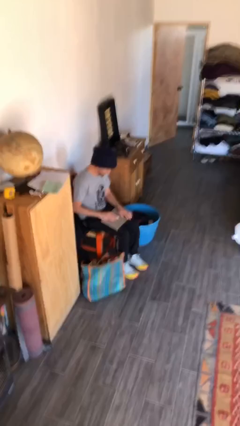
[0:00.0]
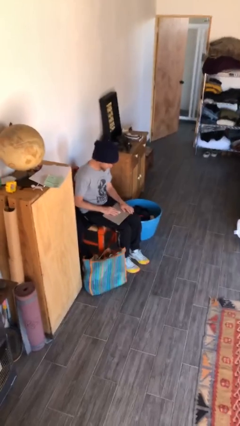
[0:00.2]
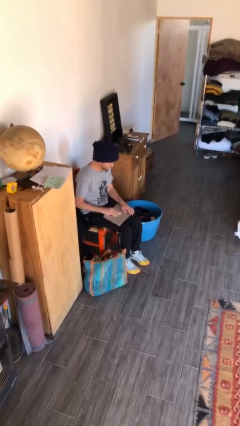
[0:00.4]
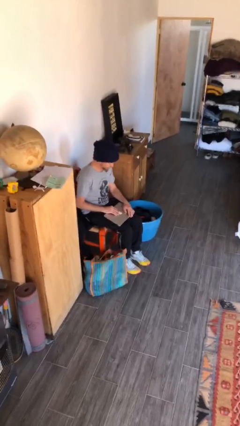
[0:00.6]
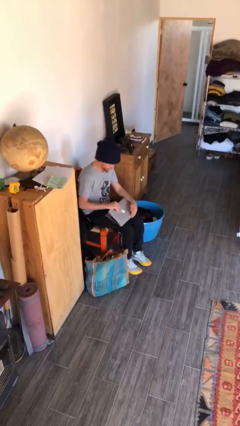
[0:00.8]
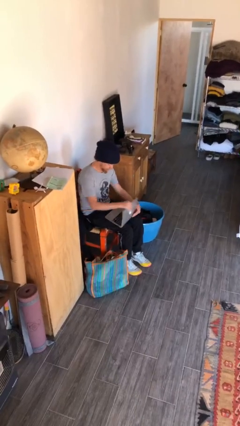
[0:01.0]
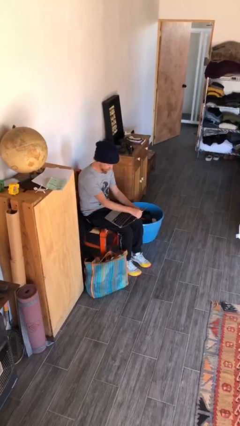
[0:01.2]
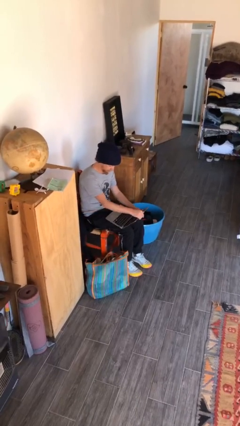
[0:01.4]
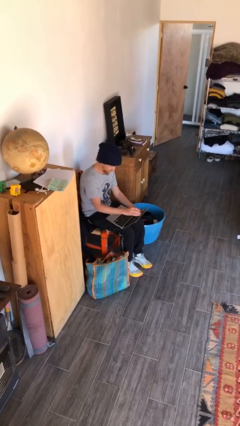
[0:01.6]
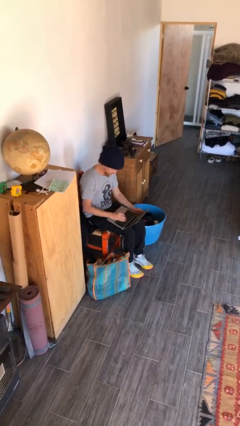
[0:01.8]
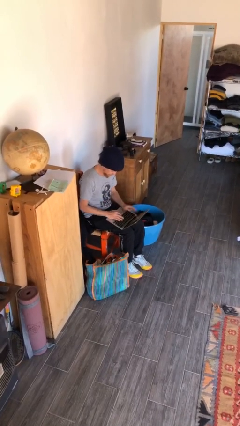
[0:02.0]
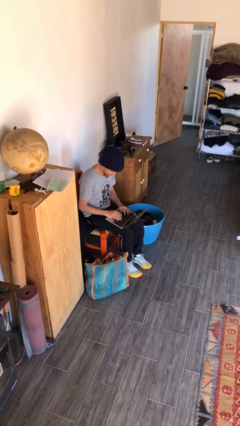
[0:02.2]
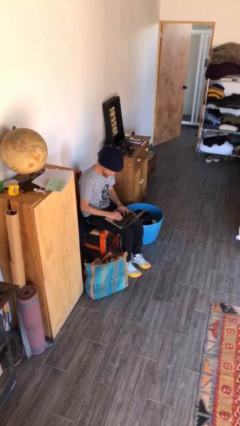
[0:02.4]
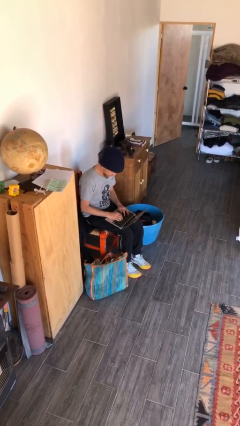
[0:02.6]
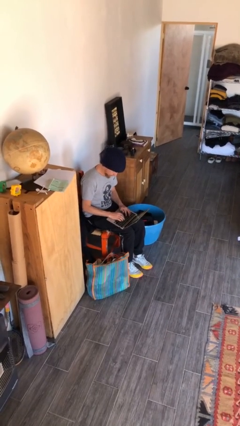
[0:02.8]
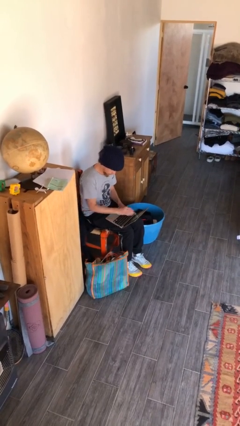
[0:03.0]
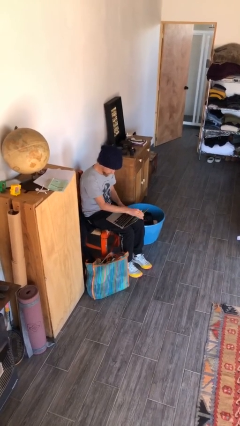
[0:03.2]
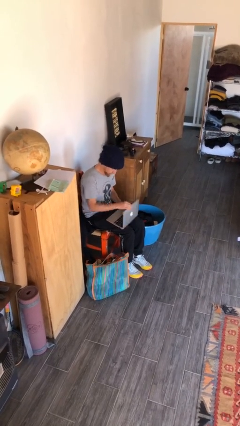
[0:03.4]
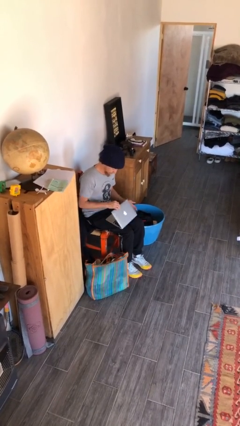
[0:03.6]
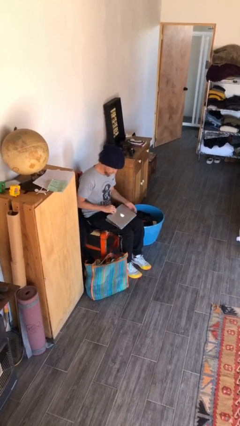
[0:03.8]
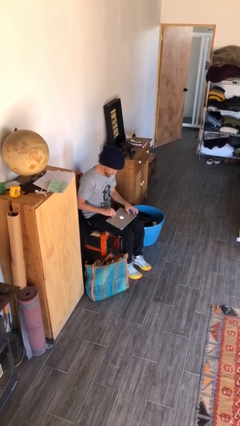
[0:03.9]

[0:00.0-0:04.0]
person interacts with laptop

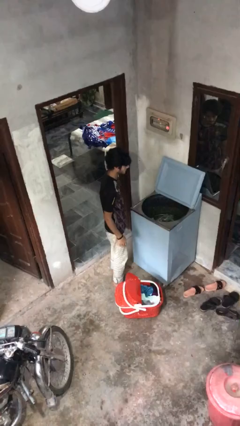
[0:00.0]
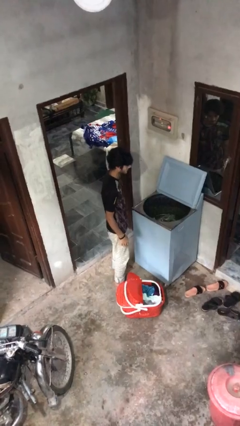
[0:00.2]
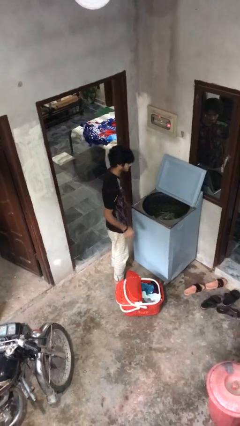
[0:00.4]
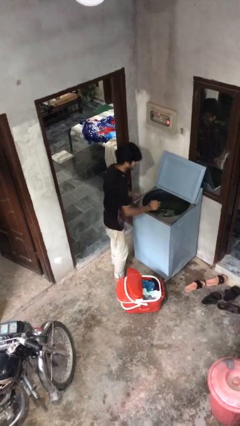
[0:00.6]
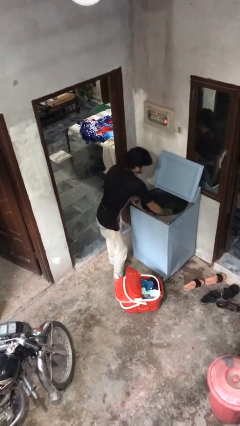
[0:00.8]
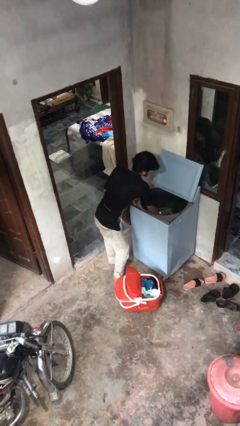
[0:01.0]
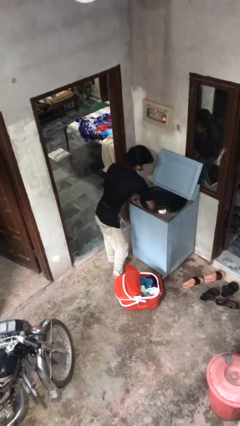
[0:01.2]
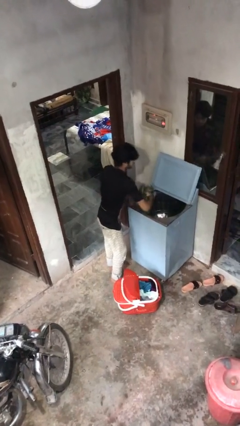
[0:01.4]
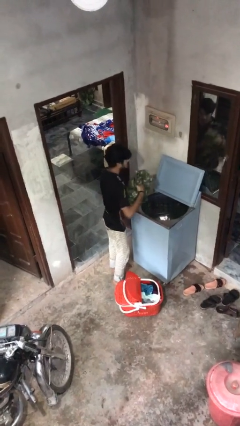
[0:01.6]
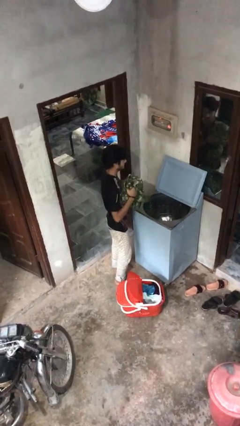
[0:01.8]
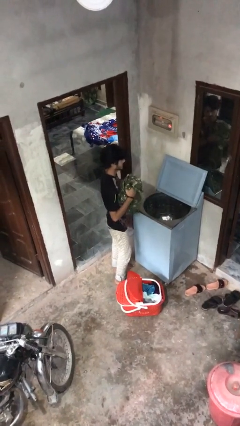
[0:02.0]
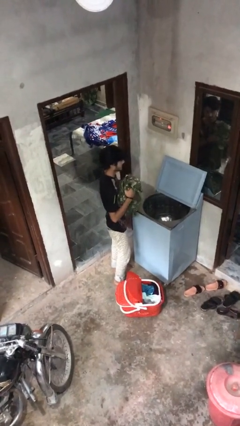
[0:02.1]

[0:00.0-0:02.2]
person unloads clotheswasher

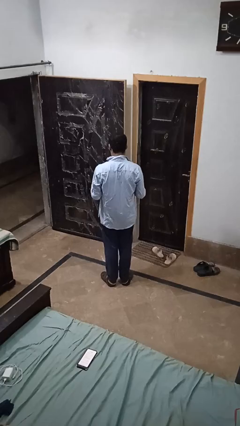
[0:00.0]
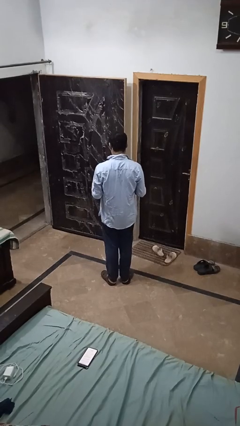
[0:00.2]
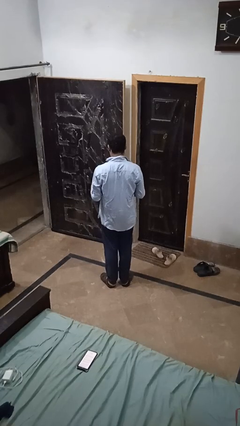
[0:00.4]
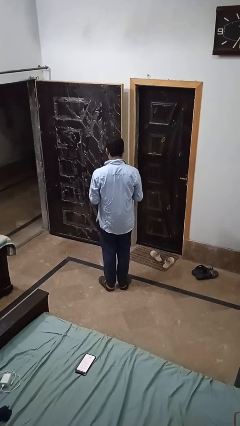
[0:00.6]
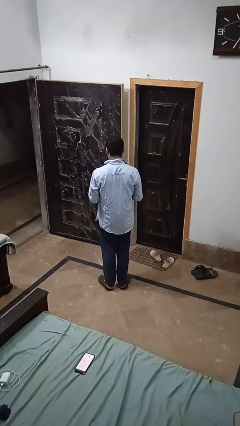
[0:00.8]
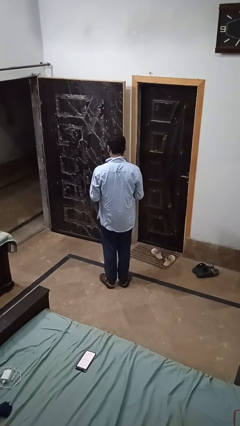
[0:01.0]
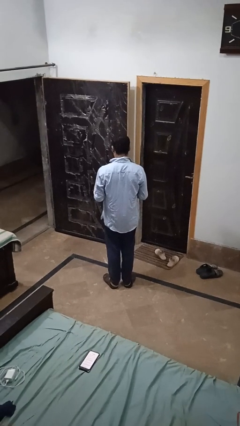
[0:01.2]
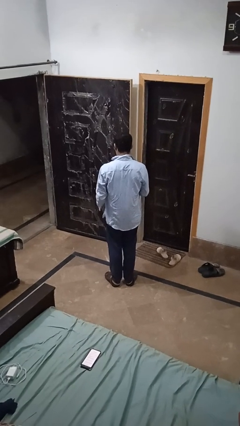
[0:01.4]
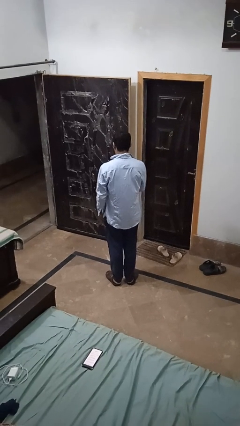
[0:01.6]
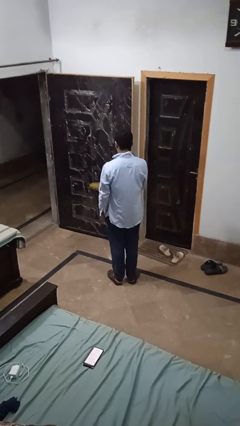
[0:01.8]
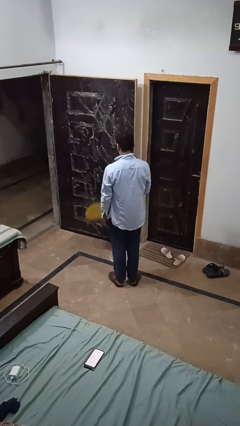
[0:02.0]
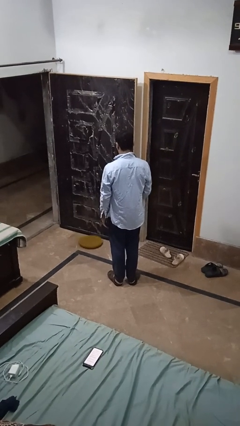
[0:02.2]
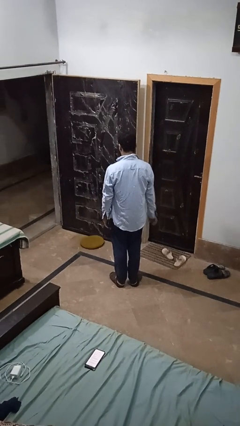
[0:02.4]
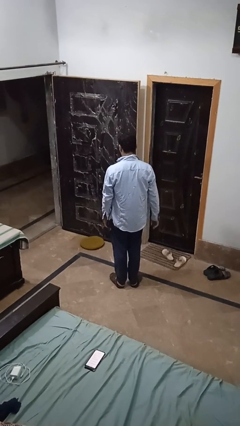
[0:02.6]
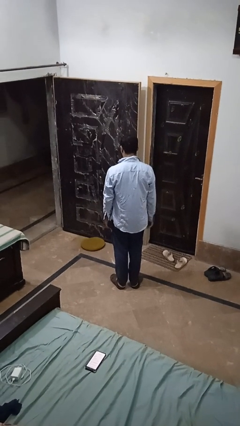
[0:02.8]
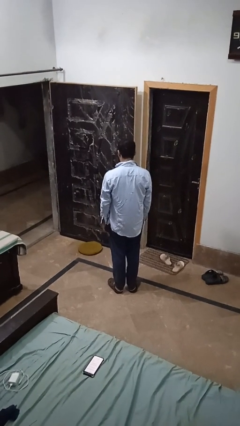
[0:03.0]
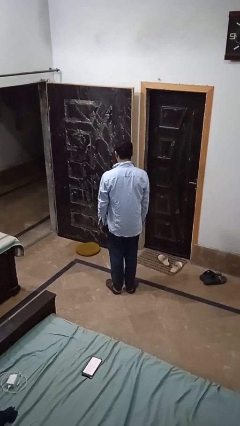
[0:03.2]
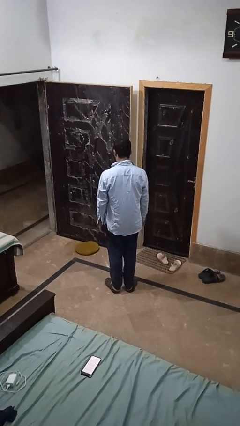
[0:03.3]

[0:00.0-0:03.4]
person throws object to ground

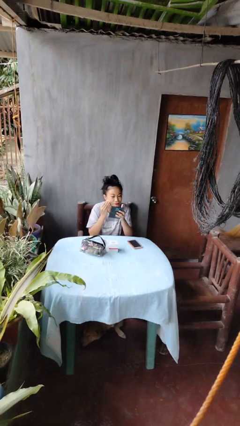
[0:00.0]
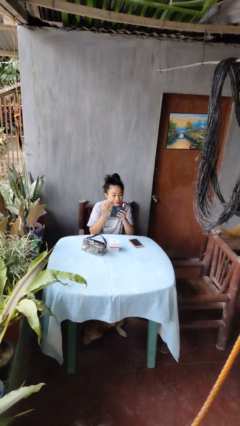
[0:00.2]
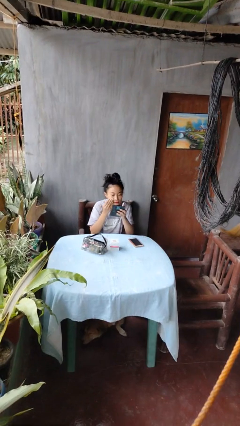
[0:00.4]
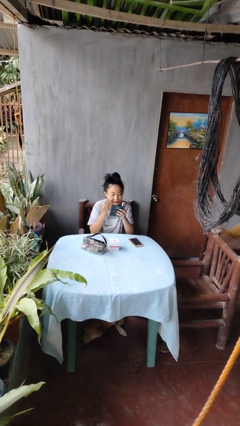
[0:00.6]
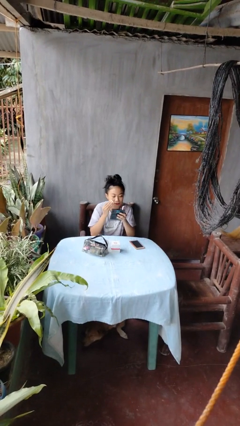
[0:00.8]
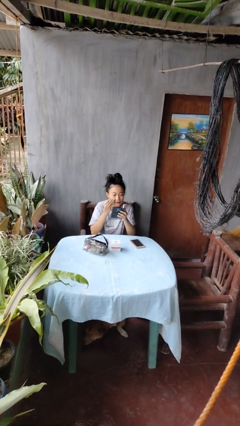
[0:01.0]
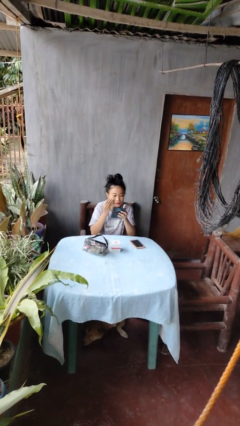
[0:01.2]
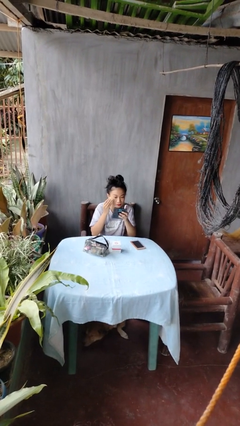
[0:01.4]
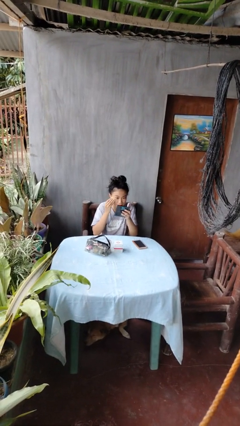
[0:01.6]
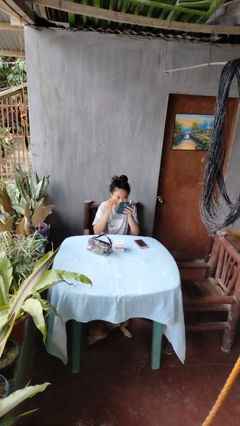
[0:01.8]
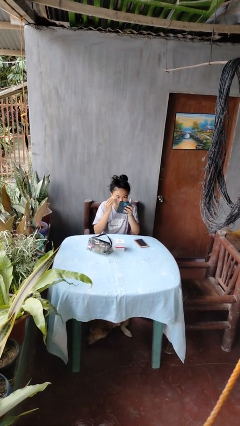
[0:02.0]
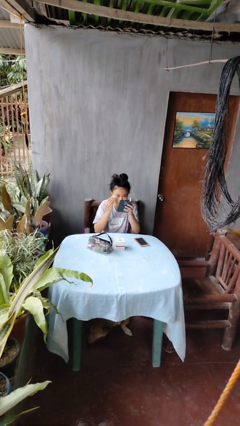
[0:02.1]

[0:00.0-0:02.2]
person applies foundation makeup

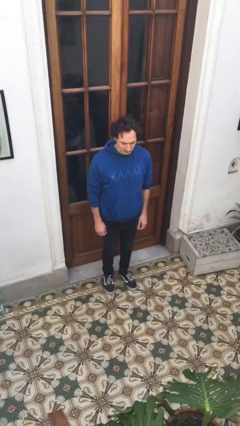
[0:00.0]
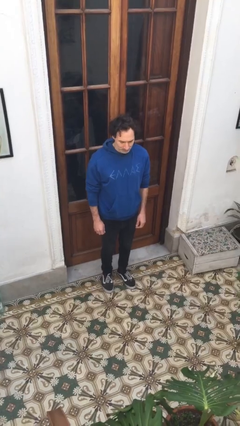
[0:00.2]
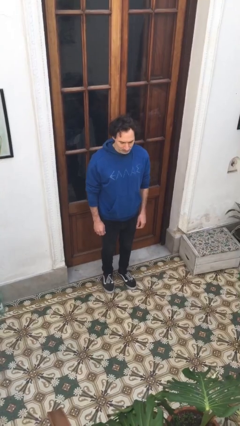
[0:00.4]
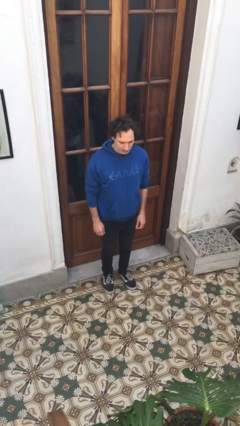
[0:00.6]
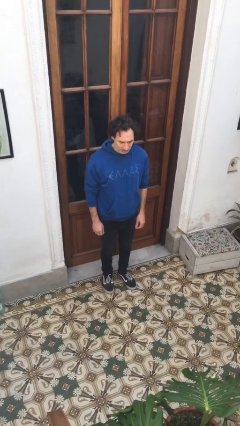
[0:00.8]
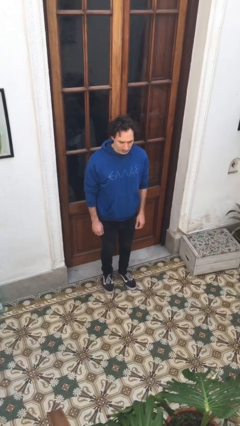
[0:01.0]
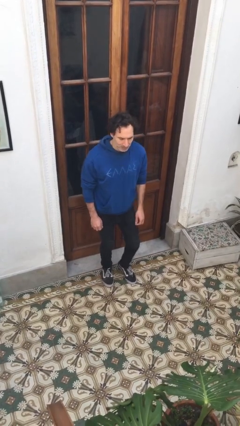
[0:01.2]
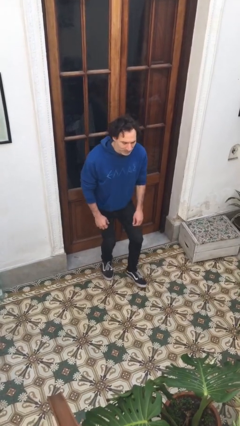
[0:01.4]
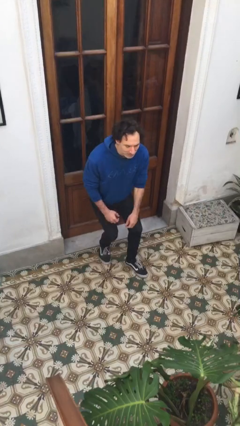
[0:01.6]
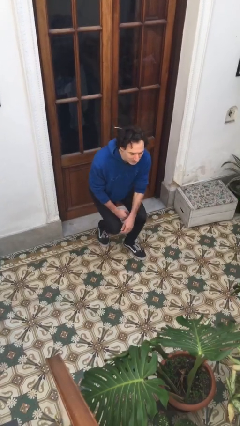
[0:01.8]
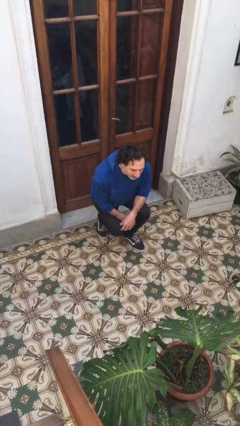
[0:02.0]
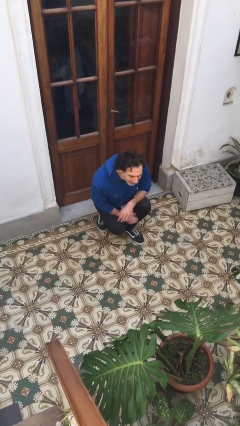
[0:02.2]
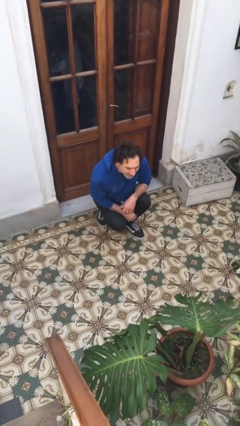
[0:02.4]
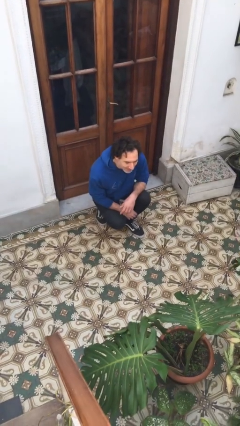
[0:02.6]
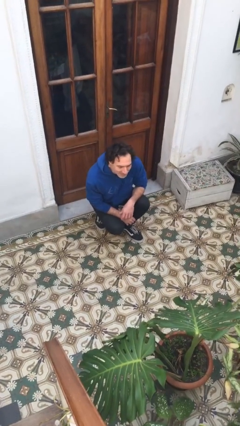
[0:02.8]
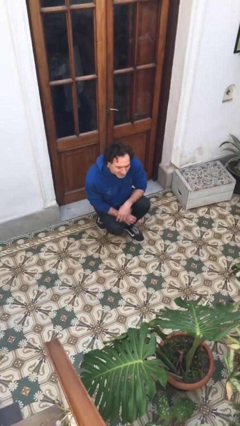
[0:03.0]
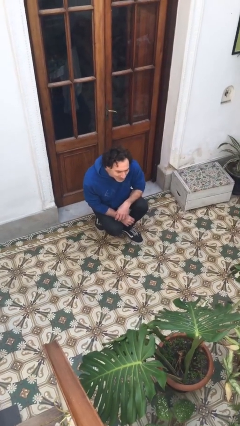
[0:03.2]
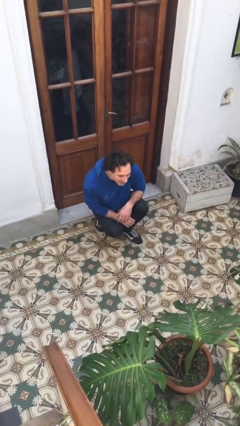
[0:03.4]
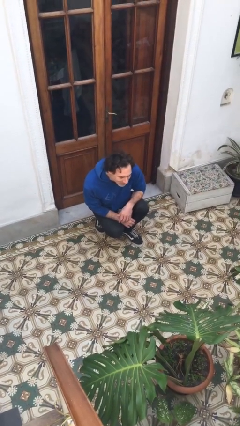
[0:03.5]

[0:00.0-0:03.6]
person squats

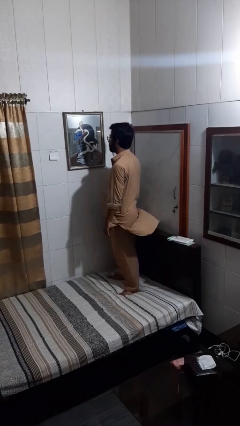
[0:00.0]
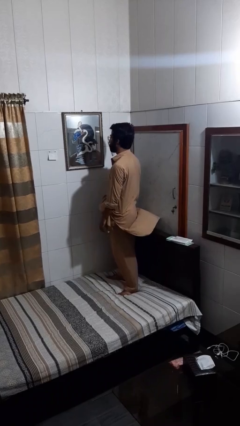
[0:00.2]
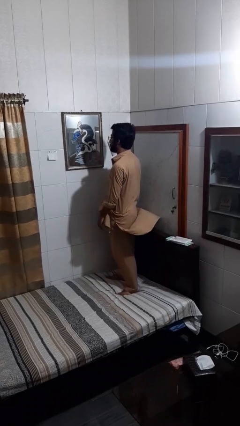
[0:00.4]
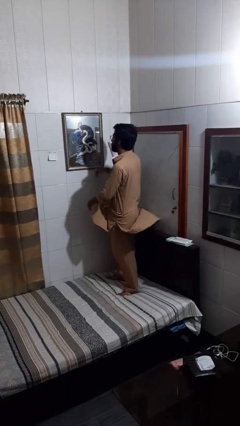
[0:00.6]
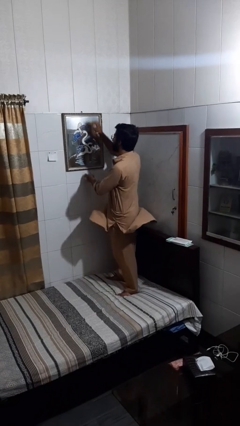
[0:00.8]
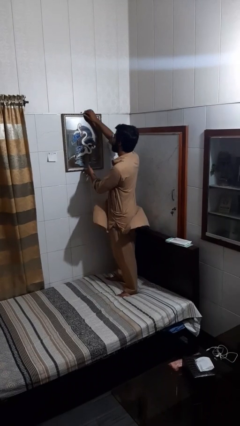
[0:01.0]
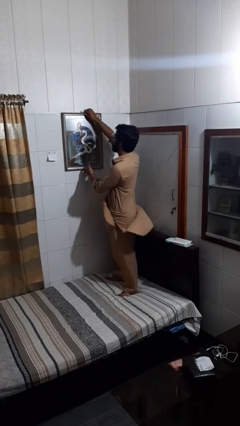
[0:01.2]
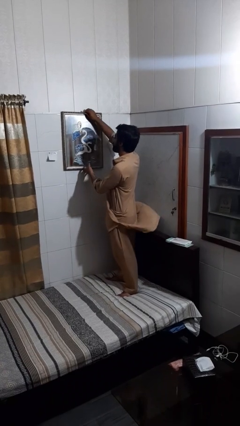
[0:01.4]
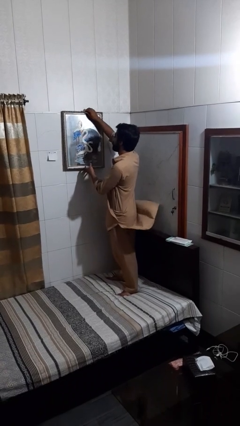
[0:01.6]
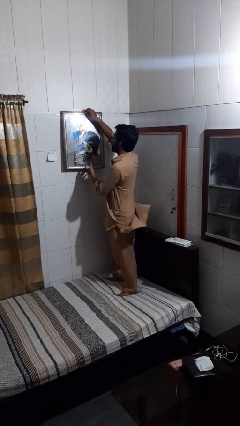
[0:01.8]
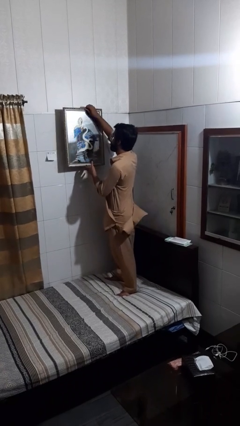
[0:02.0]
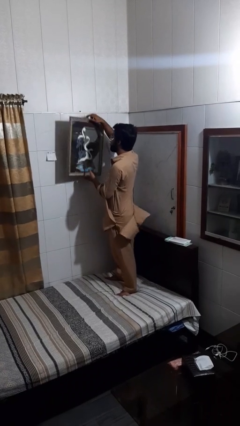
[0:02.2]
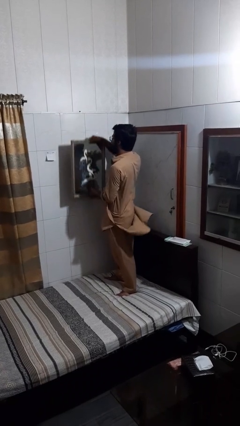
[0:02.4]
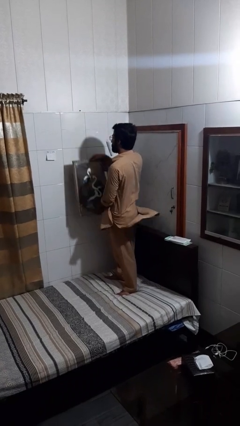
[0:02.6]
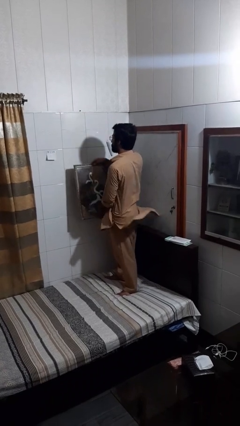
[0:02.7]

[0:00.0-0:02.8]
person takes down picture frame
